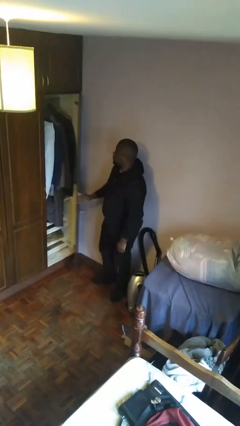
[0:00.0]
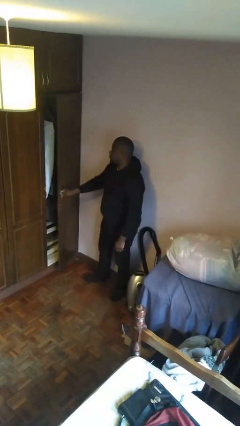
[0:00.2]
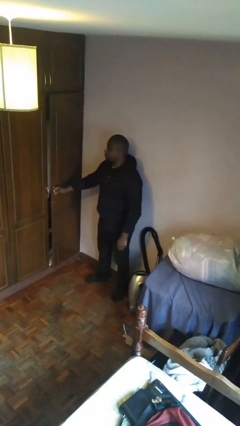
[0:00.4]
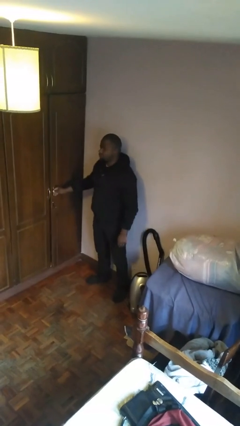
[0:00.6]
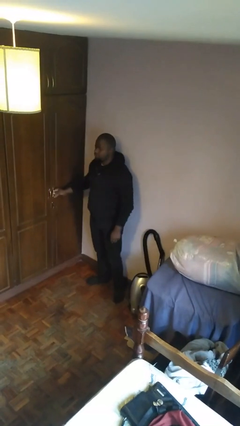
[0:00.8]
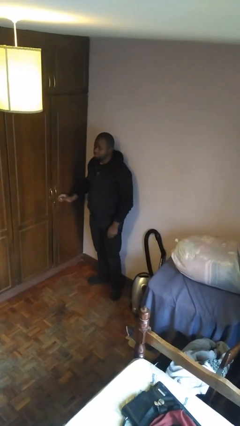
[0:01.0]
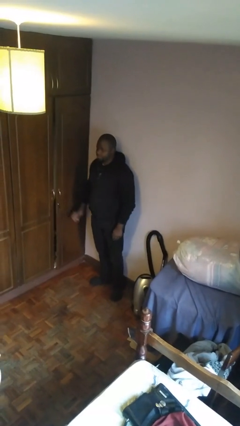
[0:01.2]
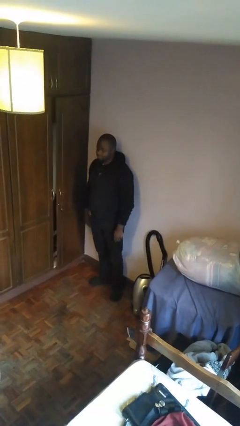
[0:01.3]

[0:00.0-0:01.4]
person closes closet door

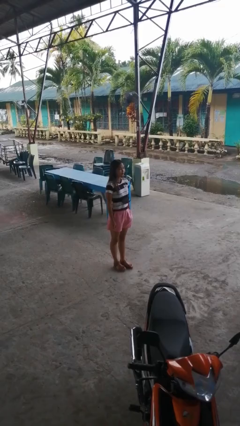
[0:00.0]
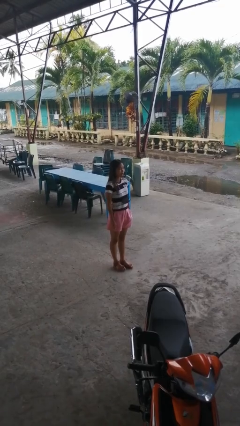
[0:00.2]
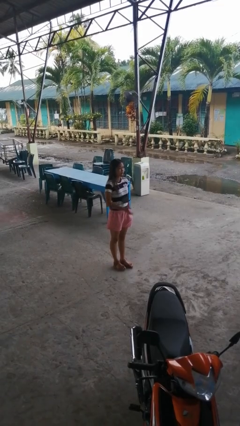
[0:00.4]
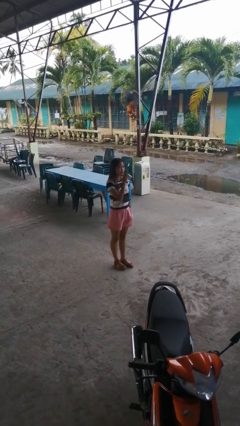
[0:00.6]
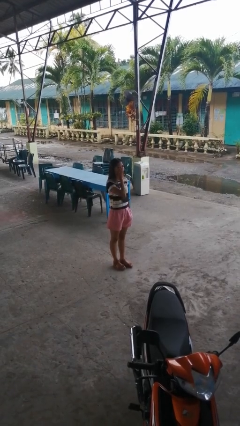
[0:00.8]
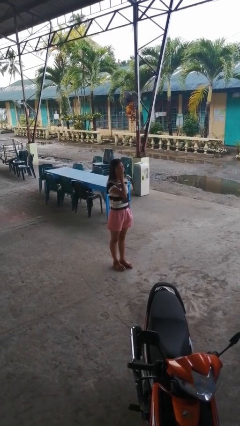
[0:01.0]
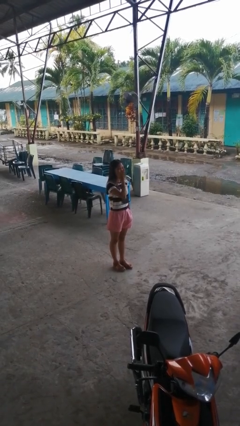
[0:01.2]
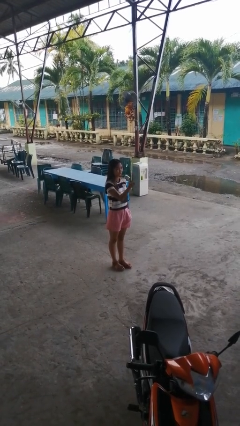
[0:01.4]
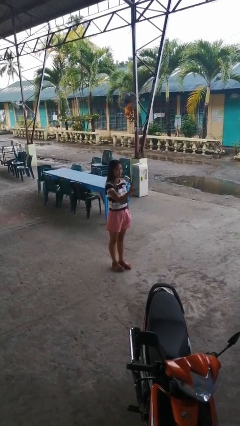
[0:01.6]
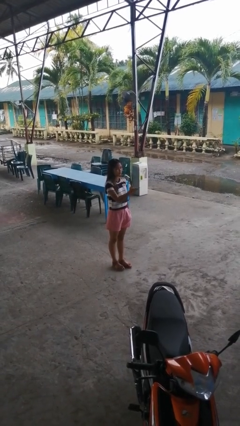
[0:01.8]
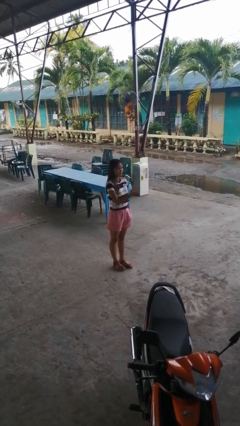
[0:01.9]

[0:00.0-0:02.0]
person gestures blow kiss

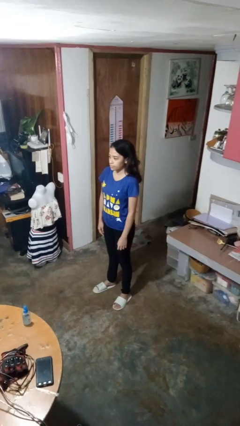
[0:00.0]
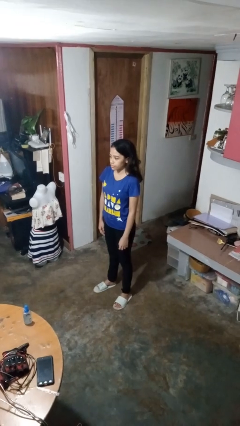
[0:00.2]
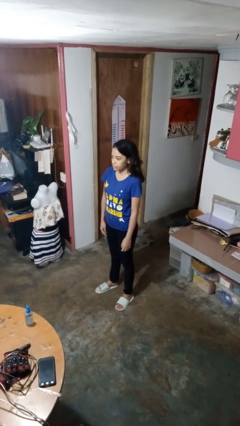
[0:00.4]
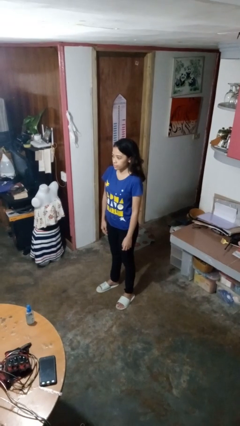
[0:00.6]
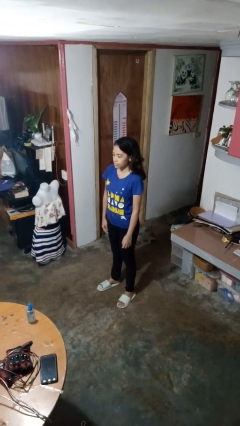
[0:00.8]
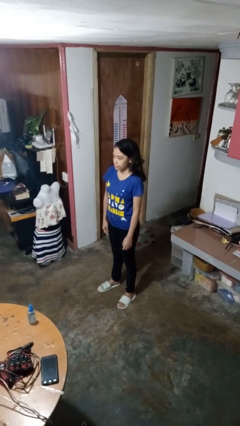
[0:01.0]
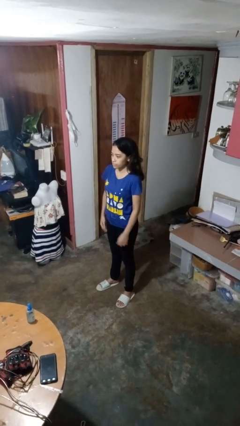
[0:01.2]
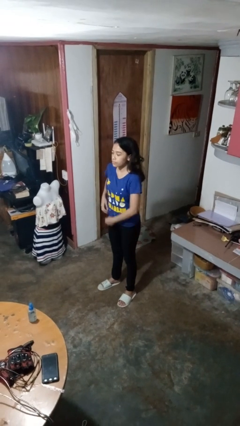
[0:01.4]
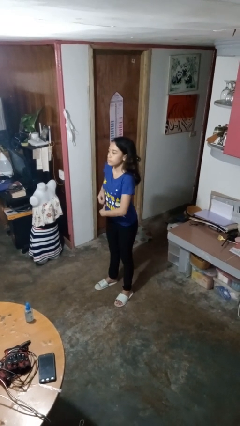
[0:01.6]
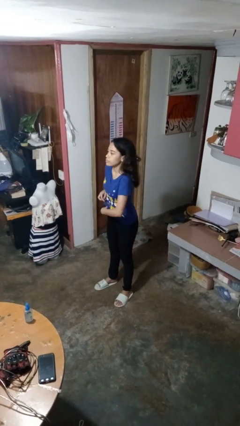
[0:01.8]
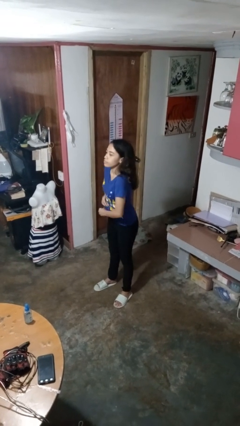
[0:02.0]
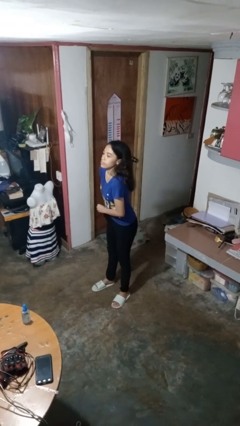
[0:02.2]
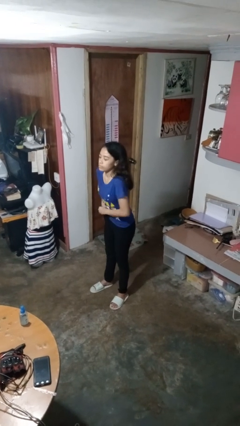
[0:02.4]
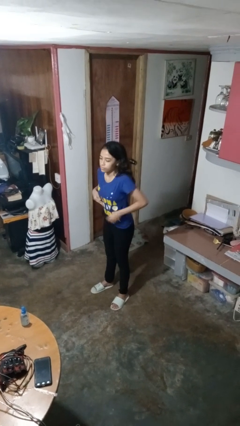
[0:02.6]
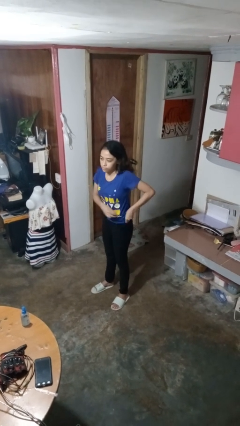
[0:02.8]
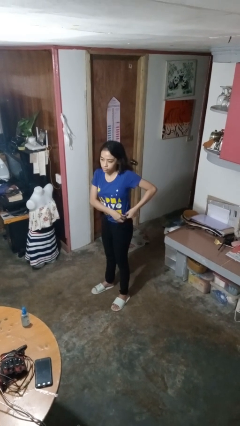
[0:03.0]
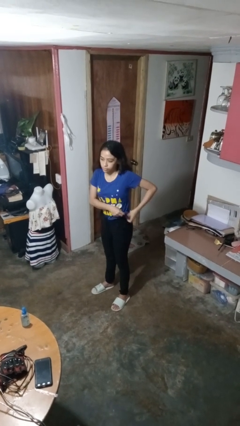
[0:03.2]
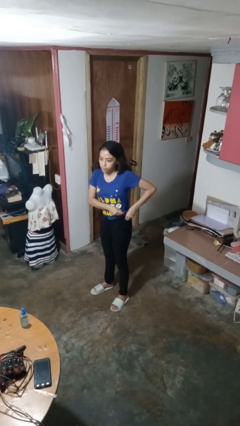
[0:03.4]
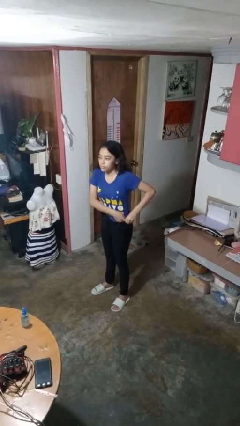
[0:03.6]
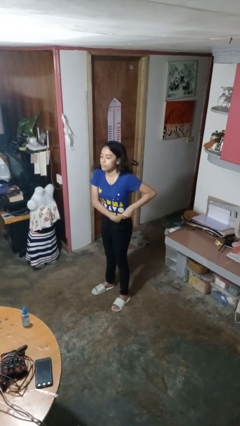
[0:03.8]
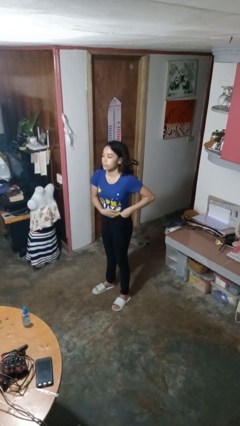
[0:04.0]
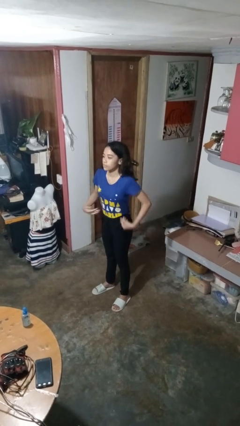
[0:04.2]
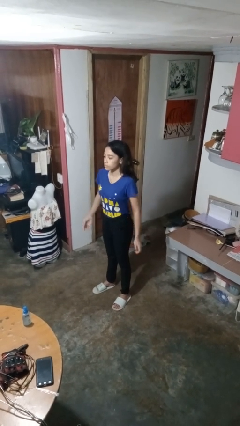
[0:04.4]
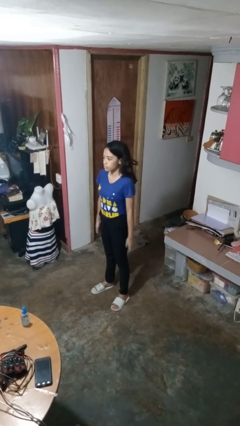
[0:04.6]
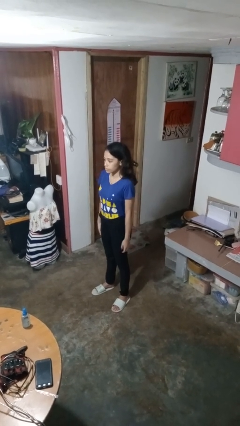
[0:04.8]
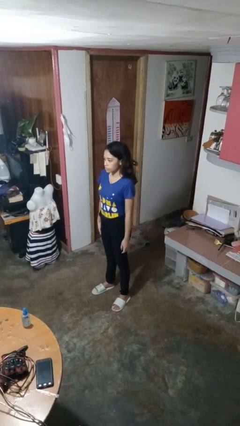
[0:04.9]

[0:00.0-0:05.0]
person tucks in shirt

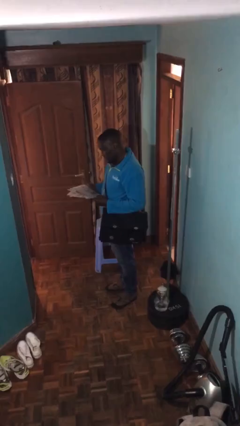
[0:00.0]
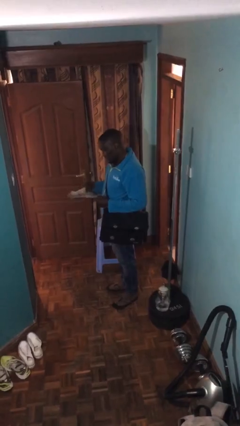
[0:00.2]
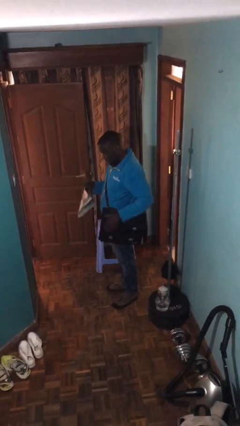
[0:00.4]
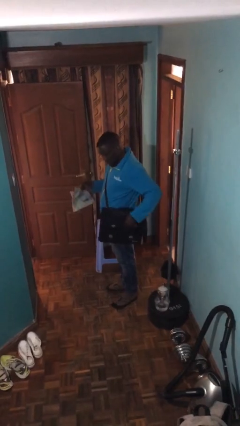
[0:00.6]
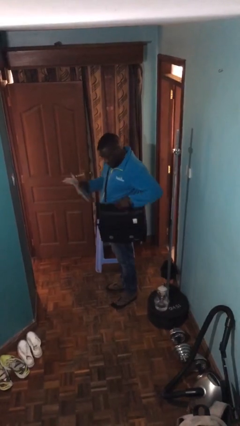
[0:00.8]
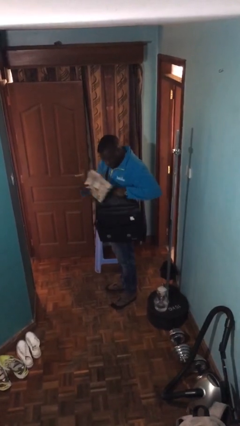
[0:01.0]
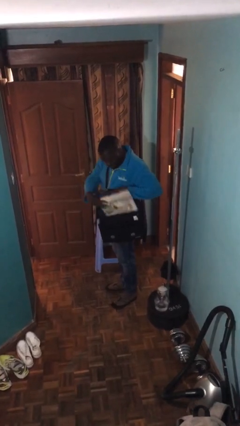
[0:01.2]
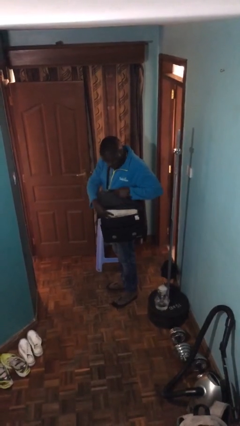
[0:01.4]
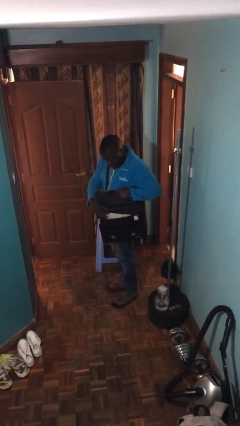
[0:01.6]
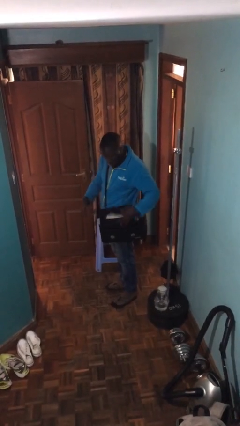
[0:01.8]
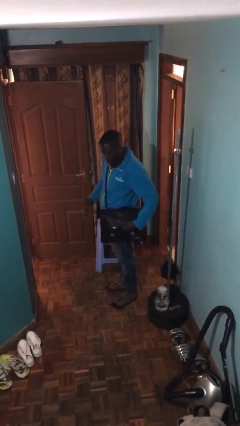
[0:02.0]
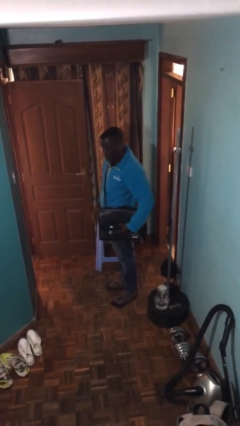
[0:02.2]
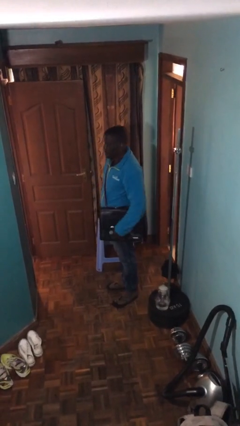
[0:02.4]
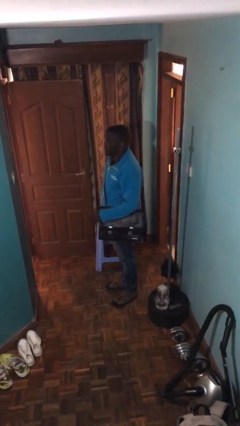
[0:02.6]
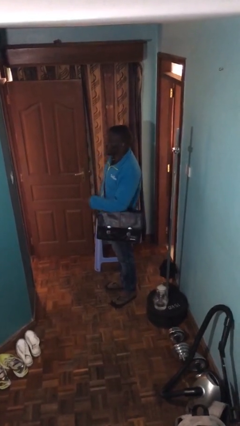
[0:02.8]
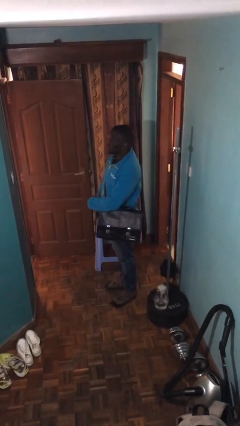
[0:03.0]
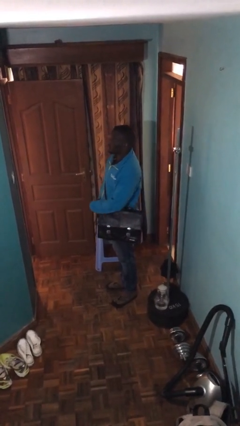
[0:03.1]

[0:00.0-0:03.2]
person puts object into purse

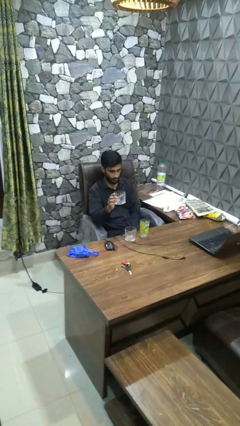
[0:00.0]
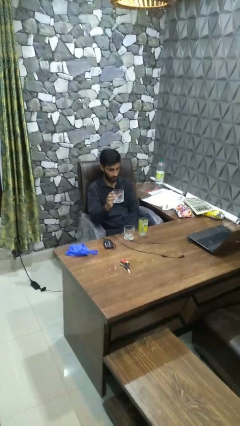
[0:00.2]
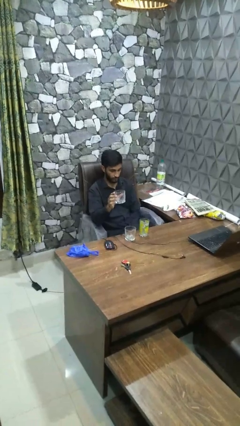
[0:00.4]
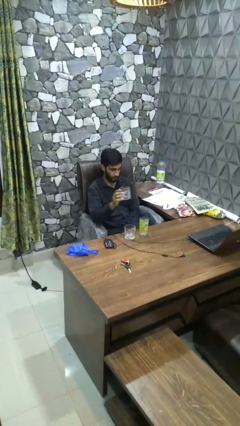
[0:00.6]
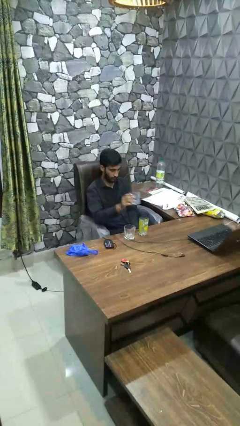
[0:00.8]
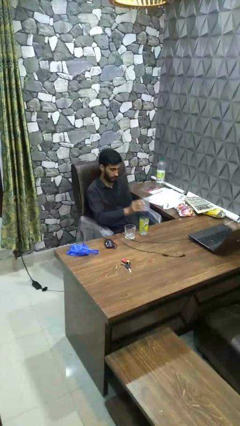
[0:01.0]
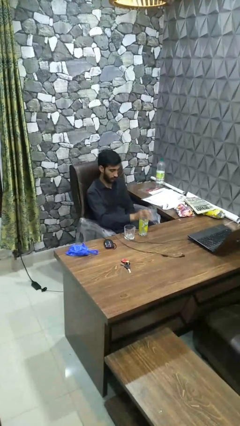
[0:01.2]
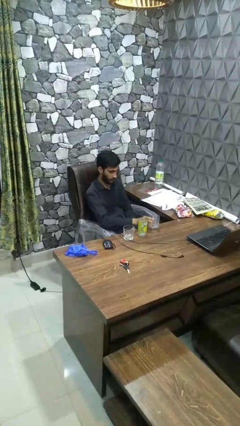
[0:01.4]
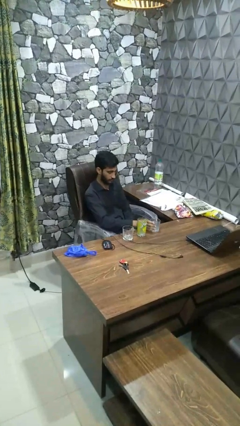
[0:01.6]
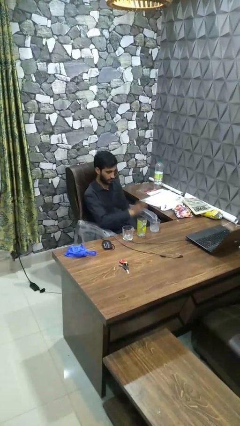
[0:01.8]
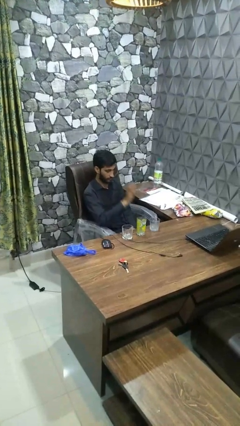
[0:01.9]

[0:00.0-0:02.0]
person puts down object on table

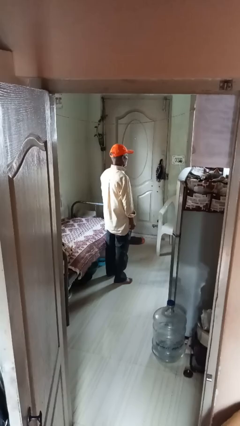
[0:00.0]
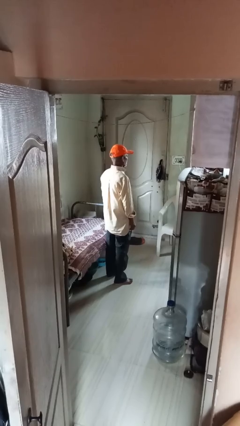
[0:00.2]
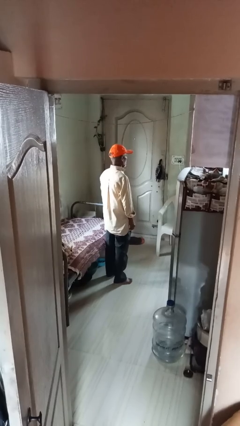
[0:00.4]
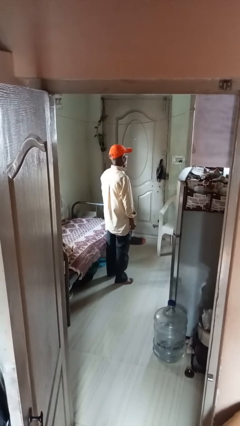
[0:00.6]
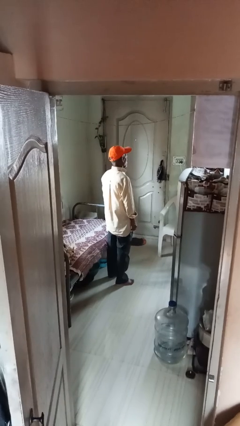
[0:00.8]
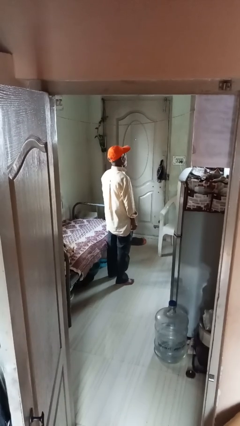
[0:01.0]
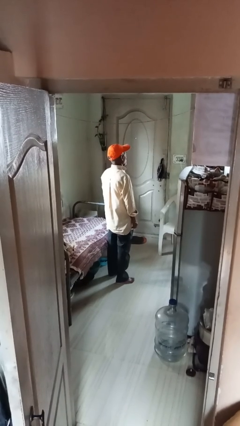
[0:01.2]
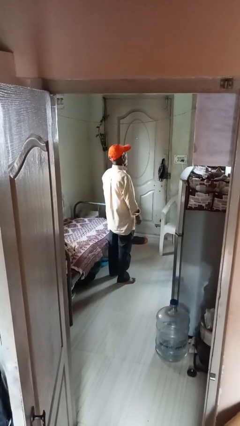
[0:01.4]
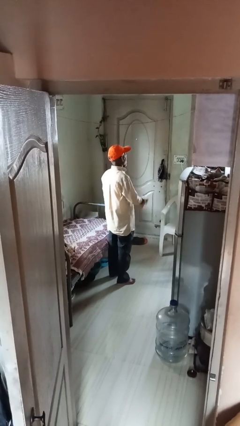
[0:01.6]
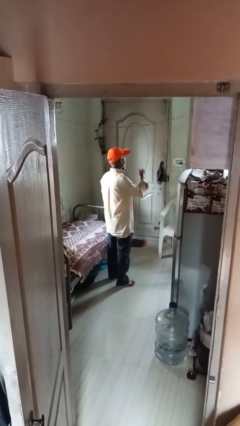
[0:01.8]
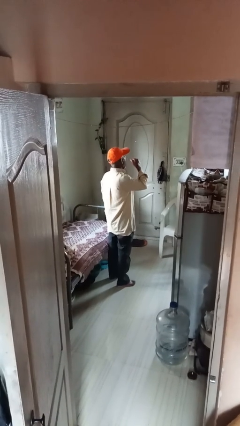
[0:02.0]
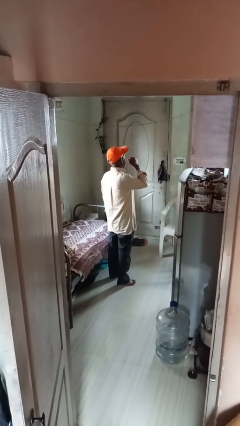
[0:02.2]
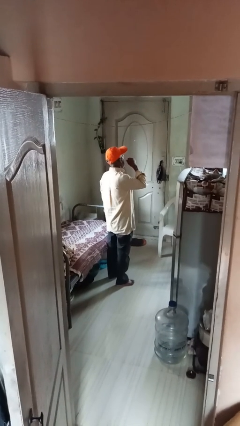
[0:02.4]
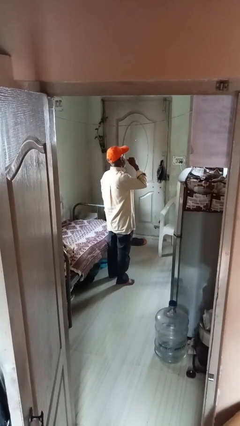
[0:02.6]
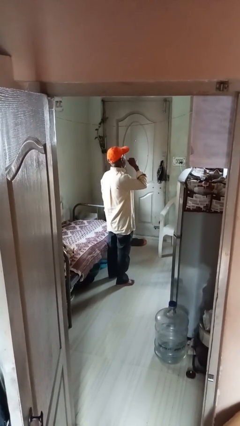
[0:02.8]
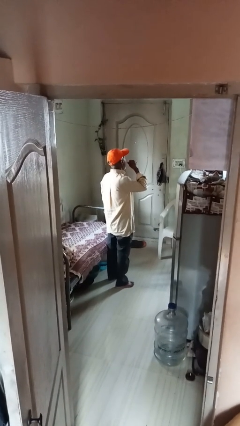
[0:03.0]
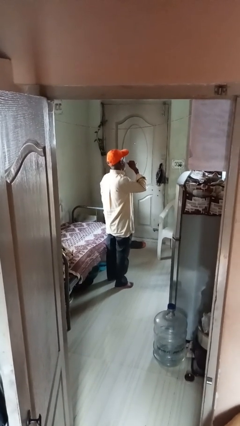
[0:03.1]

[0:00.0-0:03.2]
person yawns

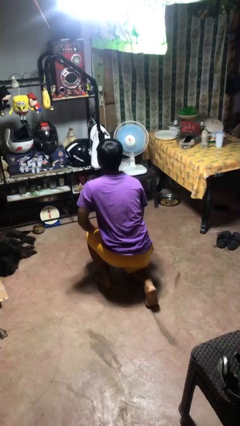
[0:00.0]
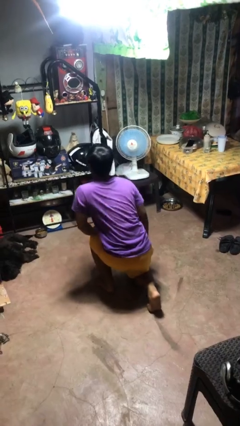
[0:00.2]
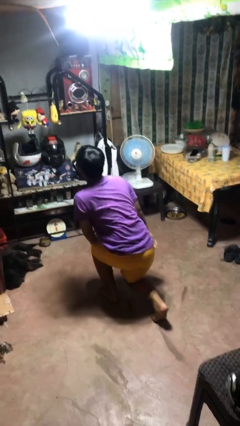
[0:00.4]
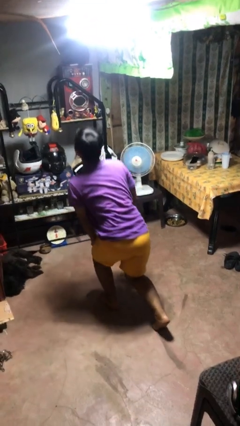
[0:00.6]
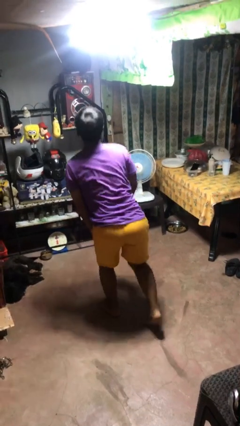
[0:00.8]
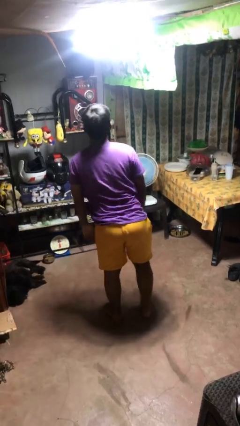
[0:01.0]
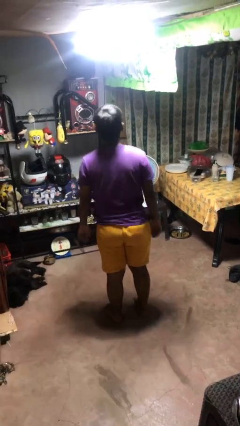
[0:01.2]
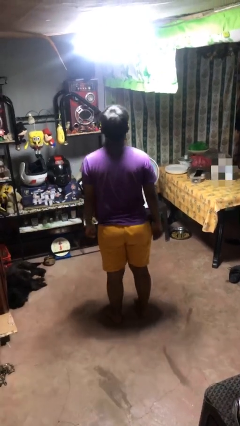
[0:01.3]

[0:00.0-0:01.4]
person stands up from floor
